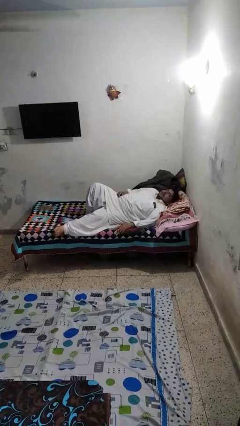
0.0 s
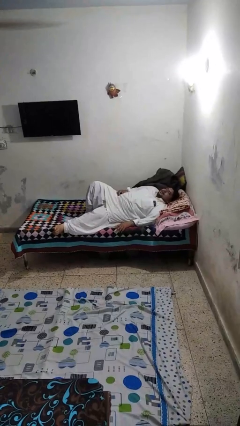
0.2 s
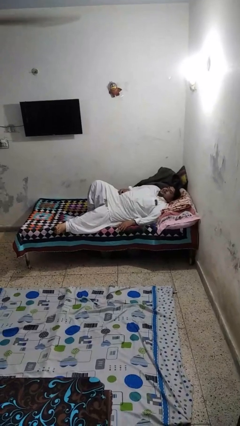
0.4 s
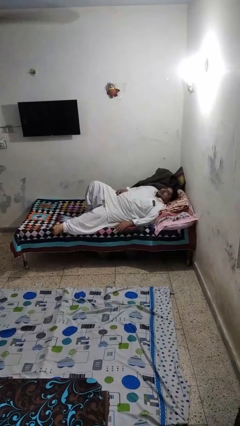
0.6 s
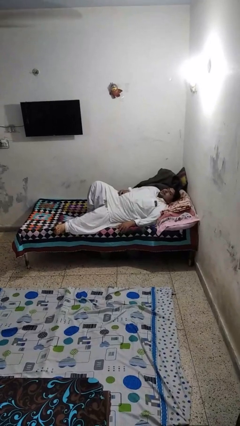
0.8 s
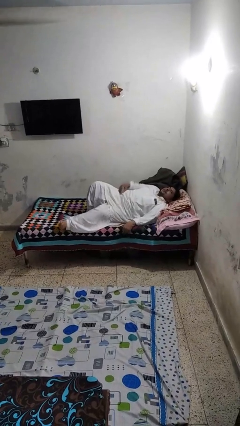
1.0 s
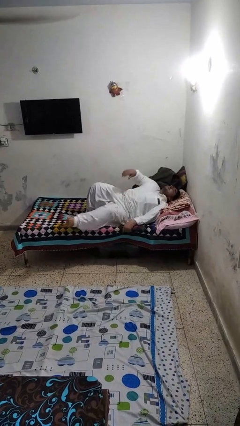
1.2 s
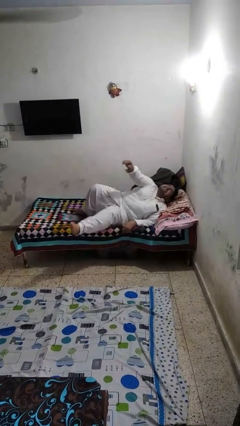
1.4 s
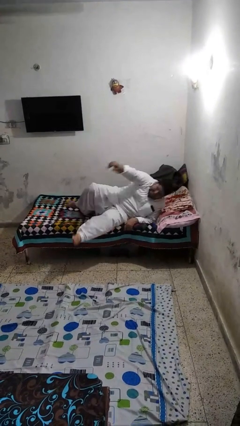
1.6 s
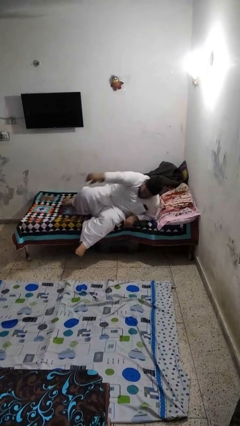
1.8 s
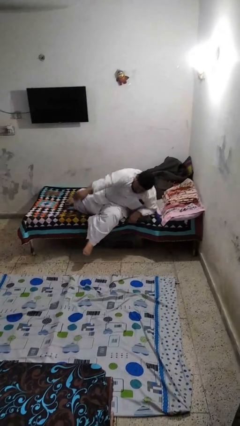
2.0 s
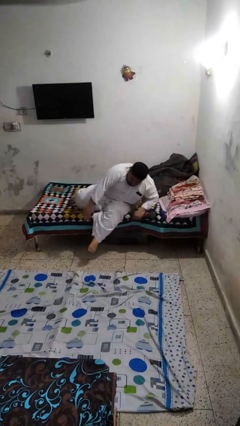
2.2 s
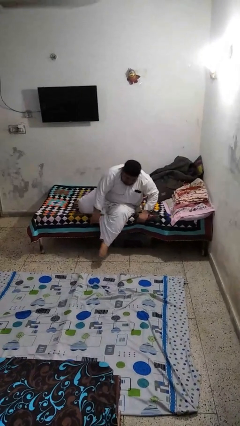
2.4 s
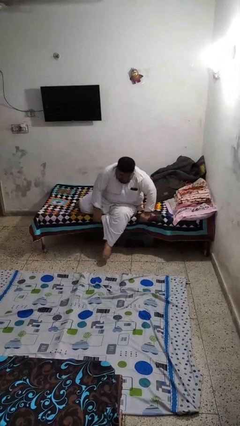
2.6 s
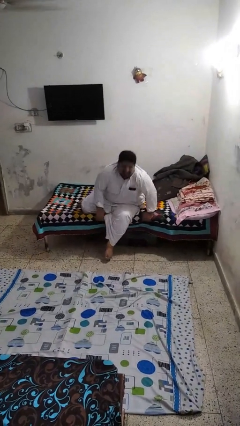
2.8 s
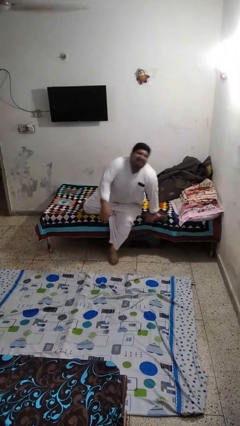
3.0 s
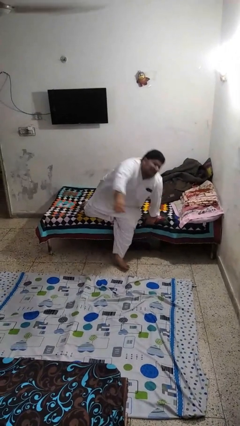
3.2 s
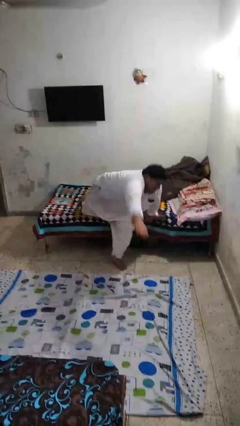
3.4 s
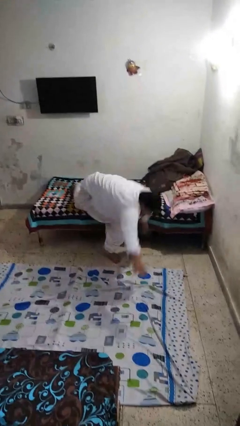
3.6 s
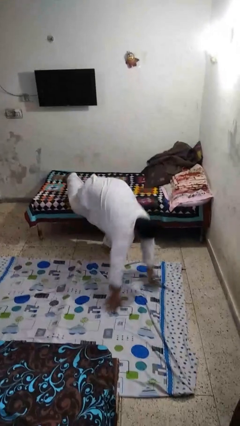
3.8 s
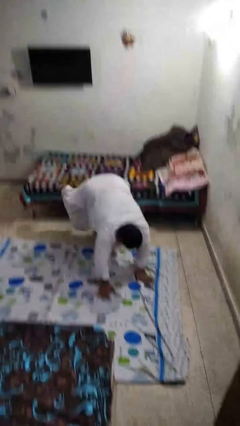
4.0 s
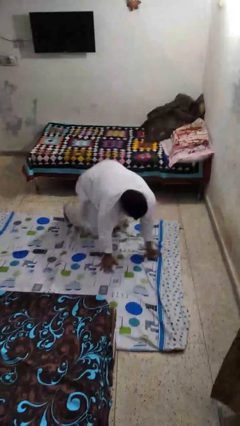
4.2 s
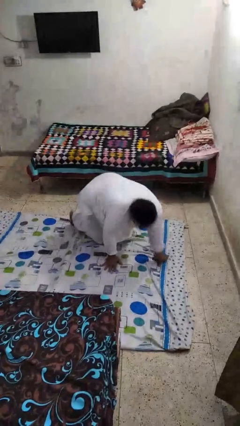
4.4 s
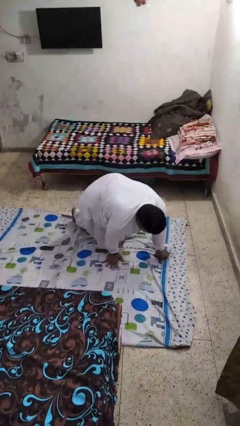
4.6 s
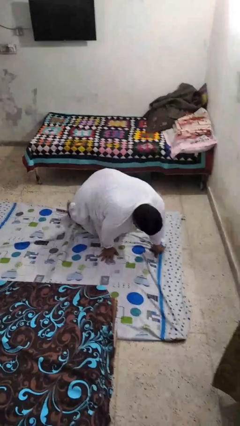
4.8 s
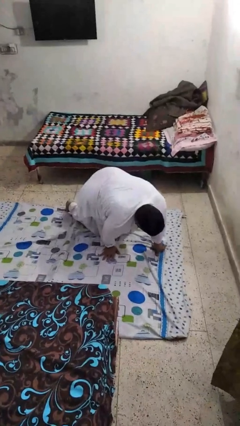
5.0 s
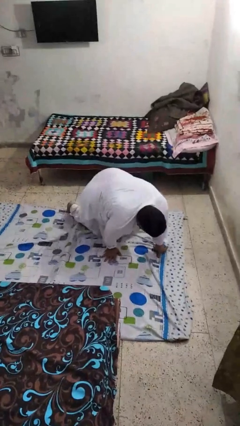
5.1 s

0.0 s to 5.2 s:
person falls from bed

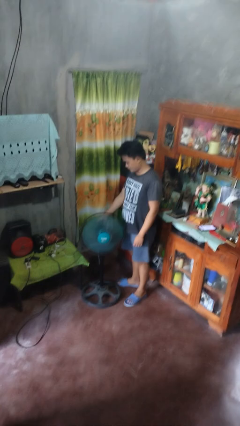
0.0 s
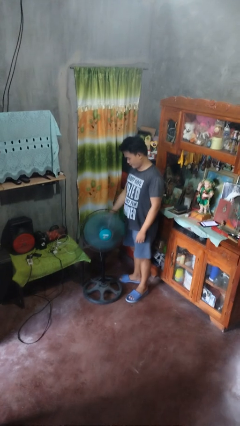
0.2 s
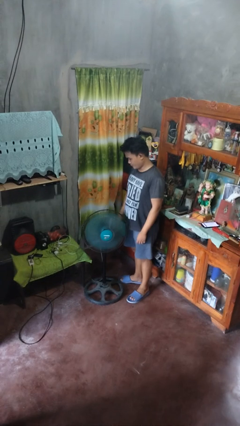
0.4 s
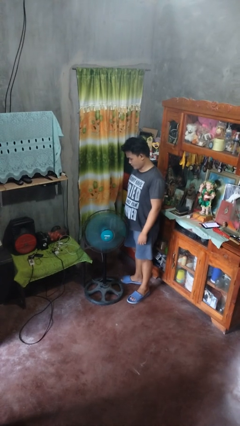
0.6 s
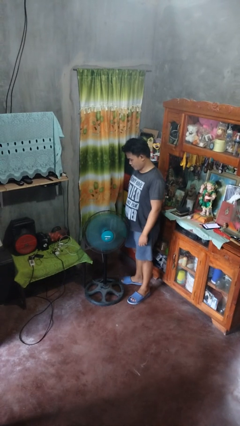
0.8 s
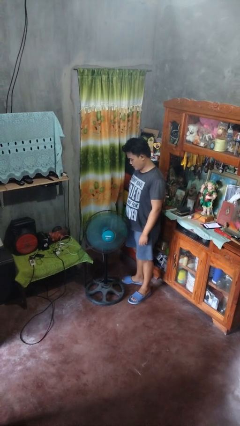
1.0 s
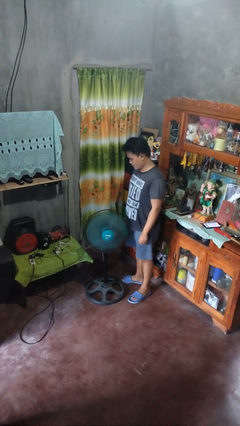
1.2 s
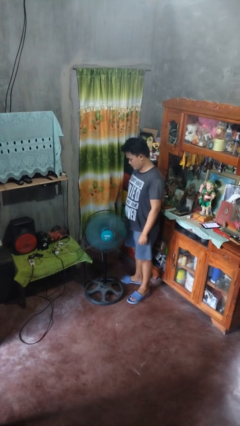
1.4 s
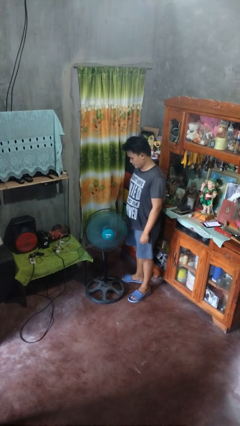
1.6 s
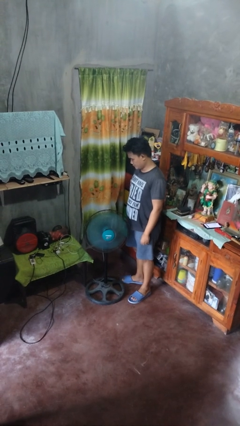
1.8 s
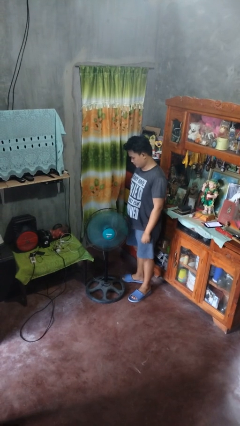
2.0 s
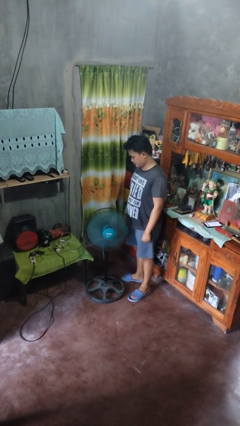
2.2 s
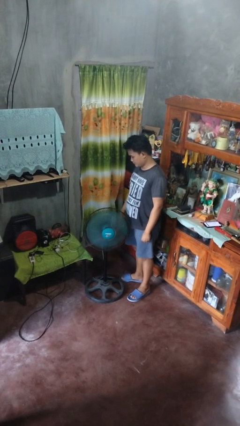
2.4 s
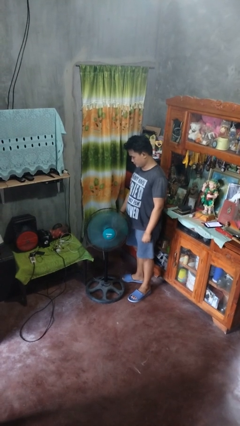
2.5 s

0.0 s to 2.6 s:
person turns off fan

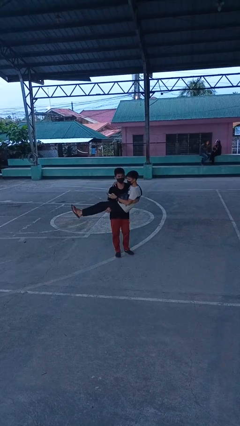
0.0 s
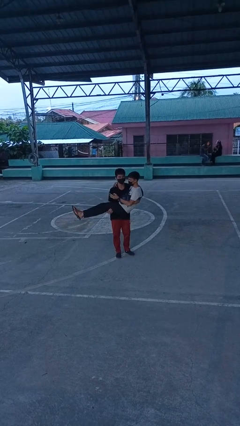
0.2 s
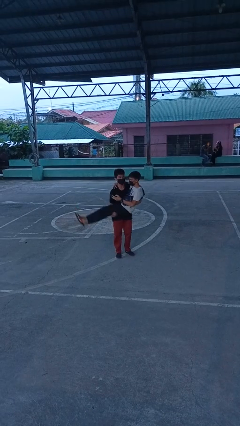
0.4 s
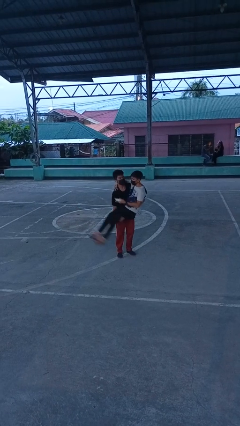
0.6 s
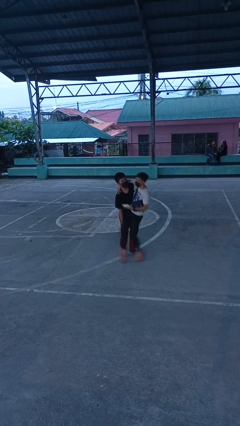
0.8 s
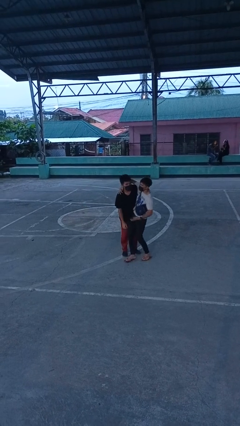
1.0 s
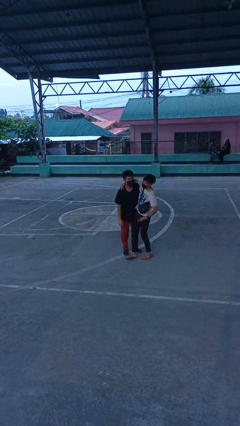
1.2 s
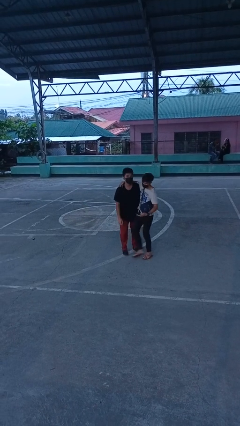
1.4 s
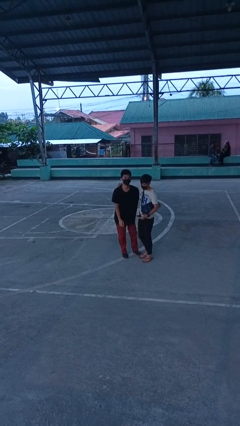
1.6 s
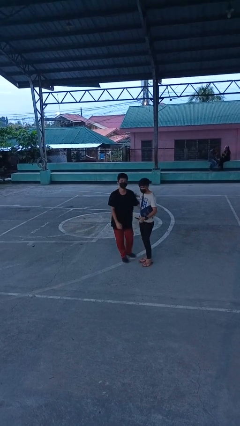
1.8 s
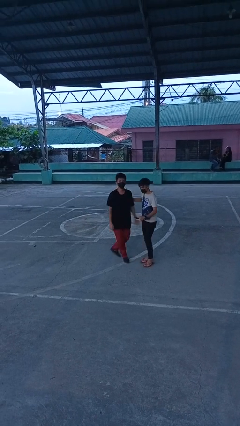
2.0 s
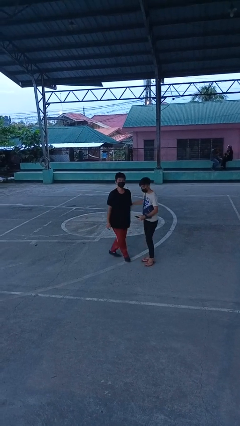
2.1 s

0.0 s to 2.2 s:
person puts down person

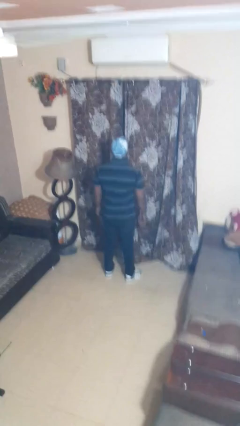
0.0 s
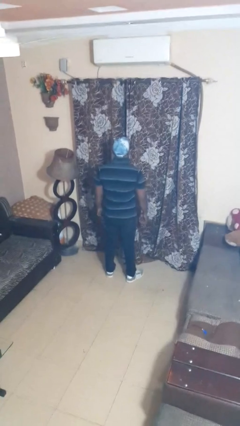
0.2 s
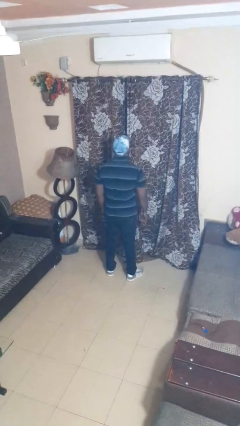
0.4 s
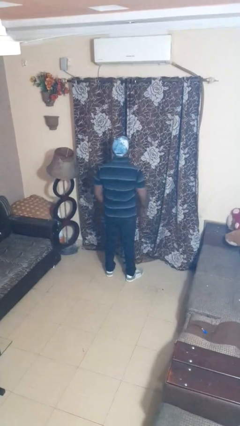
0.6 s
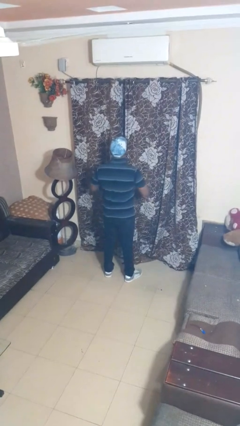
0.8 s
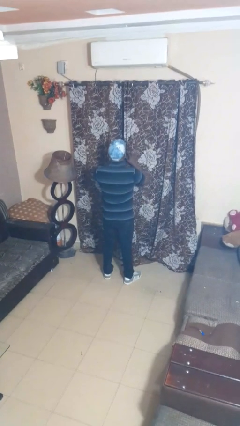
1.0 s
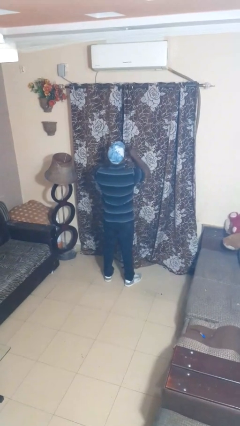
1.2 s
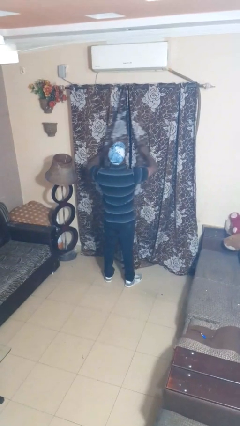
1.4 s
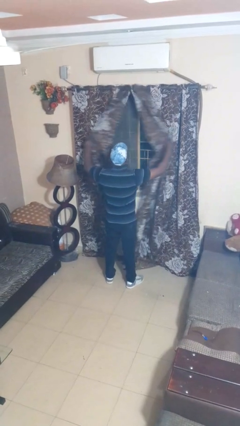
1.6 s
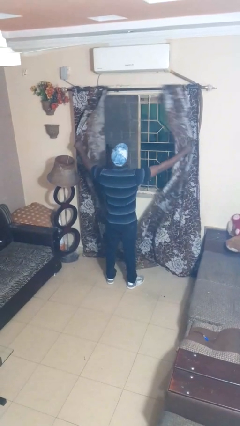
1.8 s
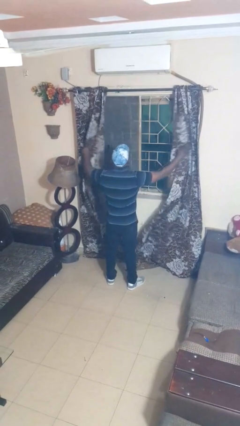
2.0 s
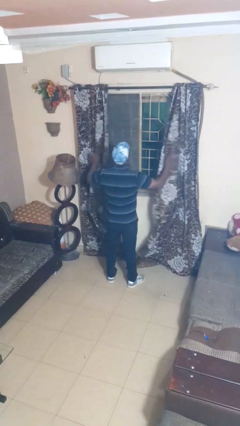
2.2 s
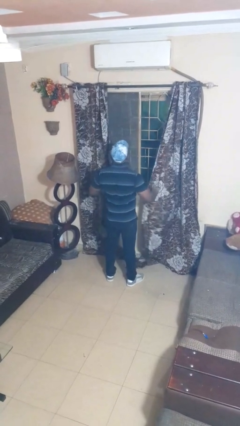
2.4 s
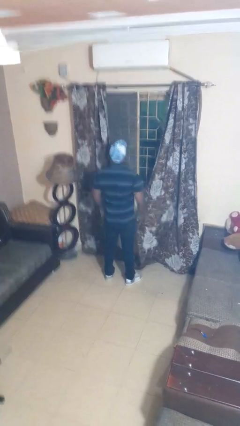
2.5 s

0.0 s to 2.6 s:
person opens curtains

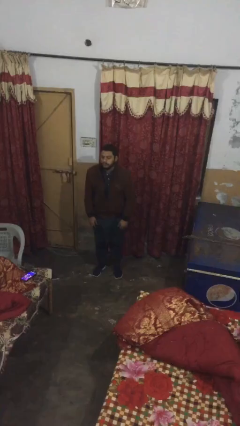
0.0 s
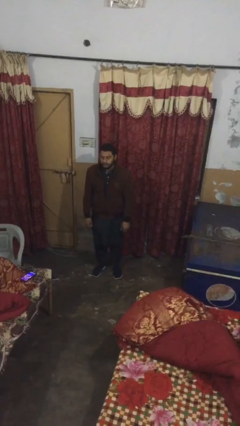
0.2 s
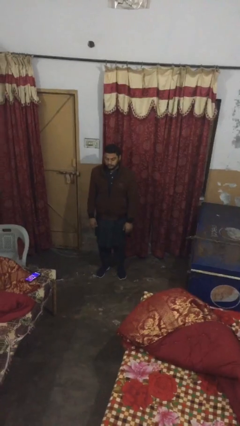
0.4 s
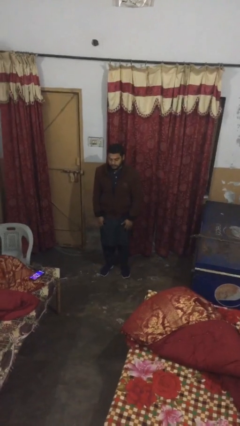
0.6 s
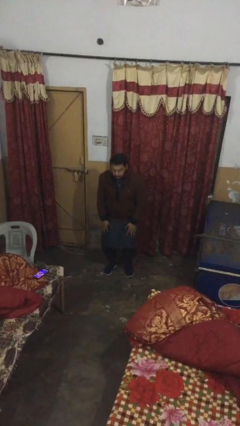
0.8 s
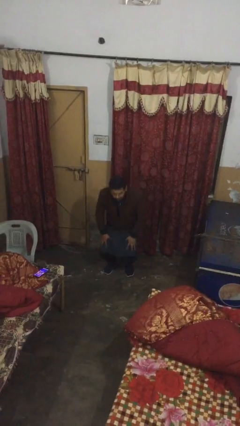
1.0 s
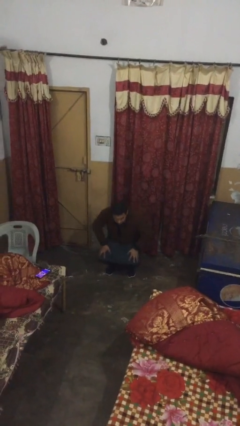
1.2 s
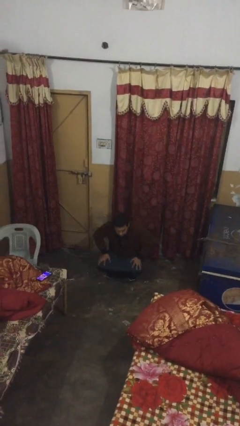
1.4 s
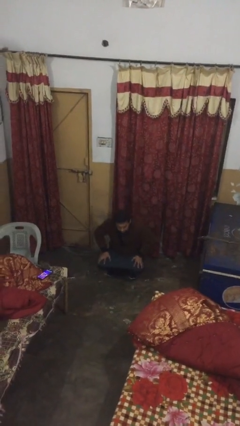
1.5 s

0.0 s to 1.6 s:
person sits down

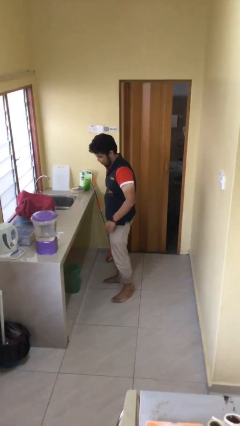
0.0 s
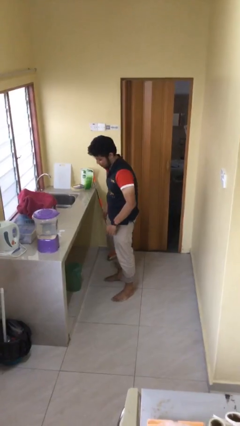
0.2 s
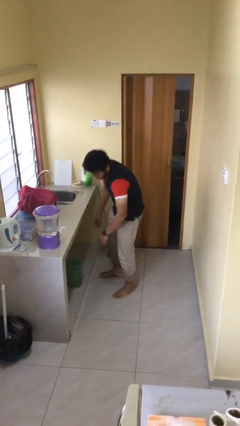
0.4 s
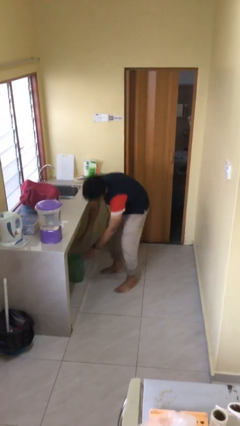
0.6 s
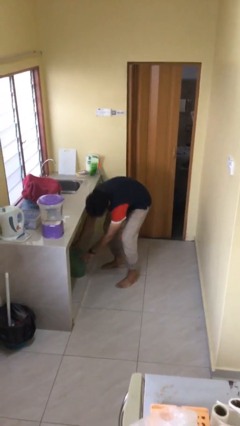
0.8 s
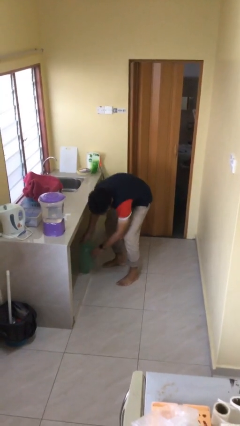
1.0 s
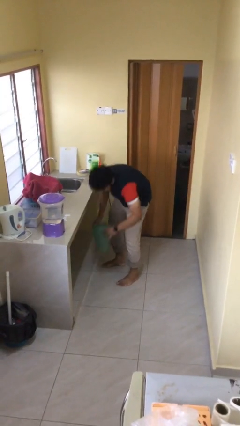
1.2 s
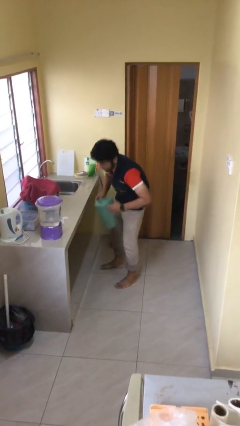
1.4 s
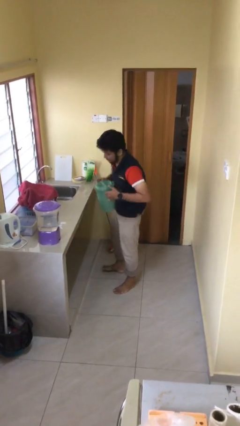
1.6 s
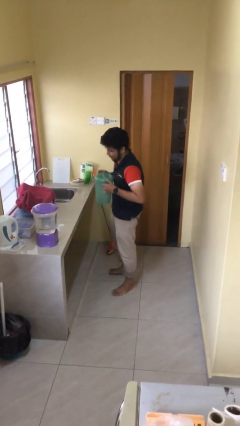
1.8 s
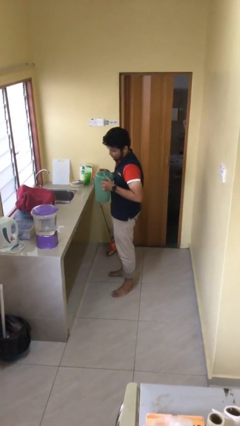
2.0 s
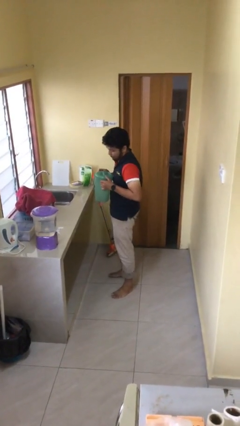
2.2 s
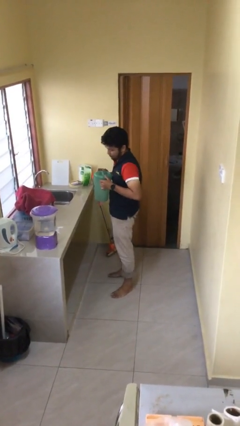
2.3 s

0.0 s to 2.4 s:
person picks up object from cabinet

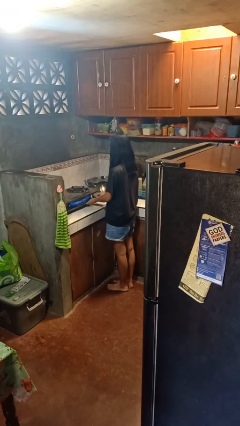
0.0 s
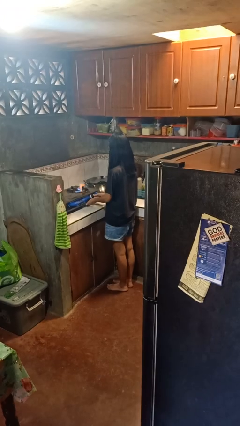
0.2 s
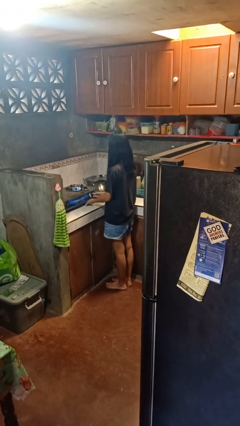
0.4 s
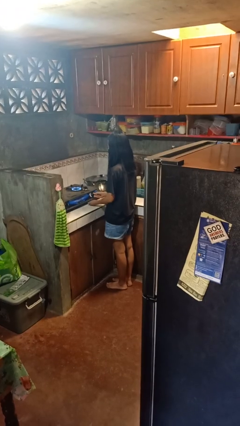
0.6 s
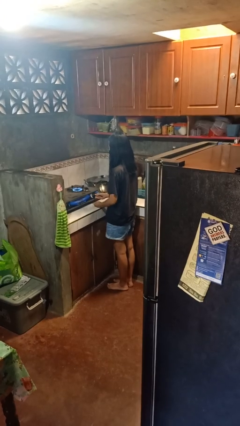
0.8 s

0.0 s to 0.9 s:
person turns on stovetop
